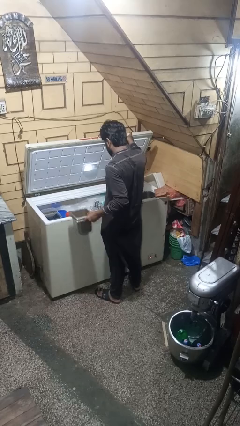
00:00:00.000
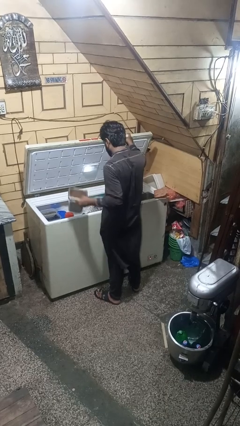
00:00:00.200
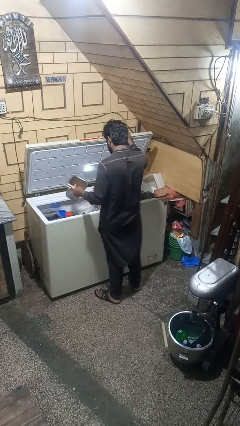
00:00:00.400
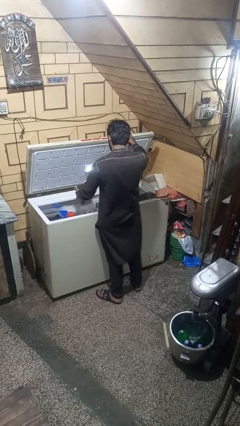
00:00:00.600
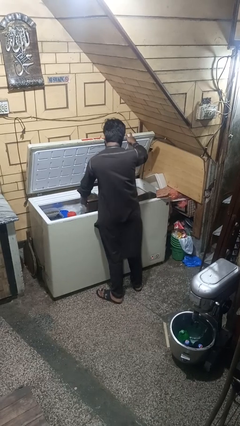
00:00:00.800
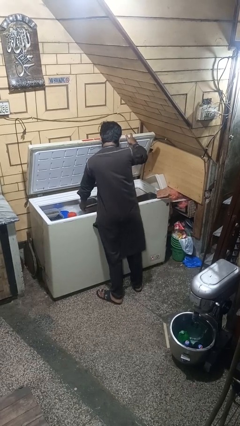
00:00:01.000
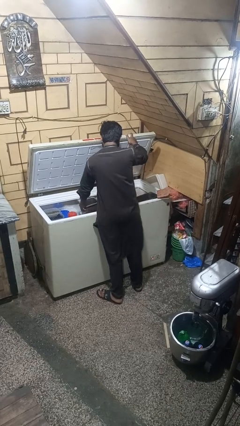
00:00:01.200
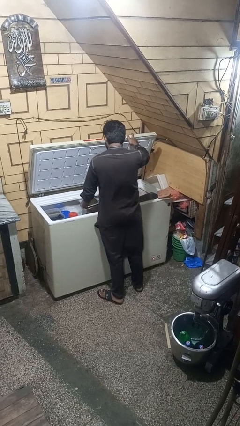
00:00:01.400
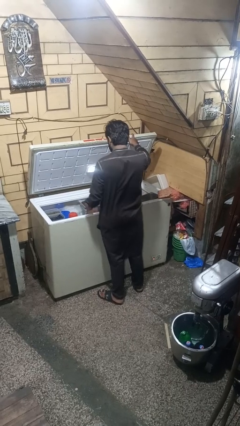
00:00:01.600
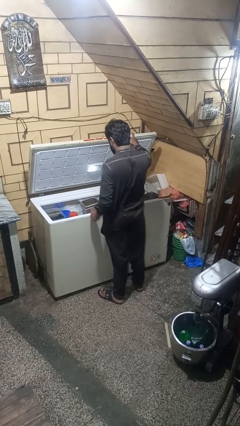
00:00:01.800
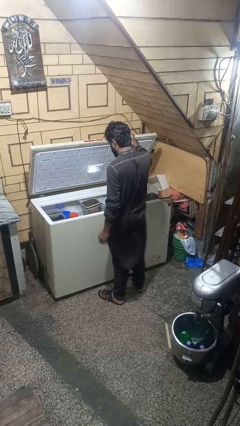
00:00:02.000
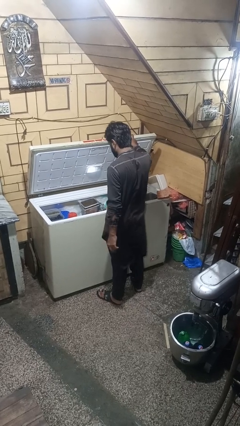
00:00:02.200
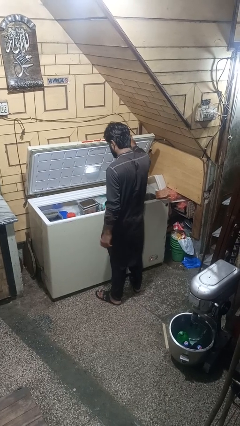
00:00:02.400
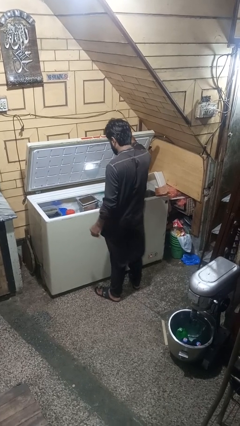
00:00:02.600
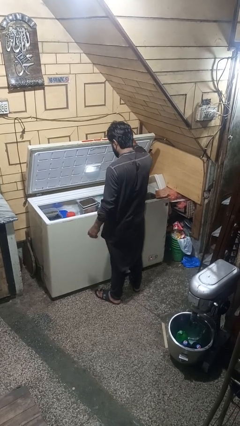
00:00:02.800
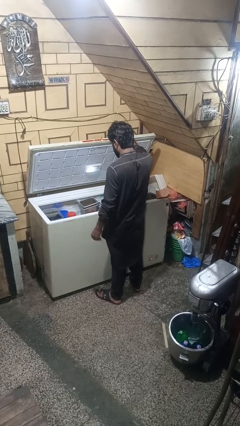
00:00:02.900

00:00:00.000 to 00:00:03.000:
person puts object into refrigerator

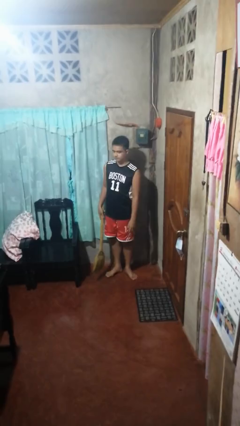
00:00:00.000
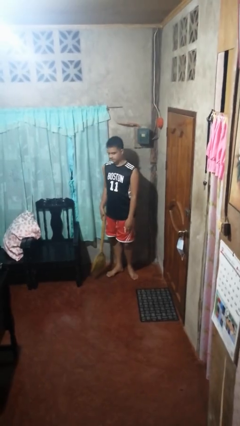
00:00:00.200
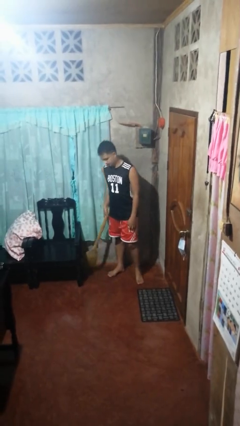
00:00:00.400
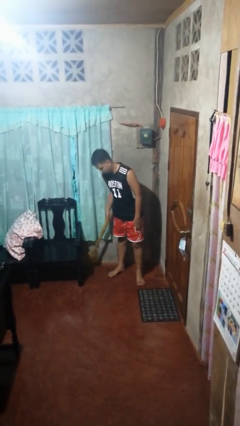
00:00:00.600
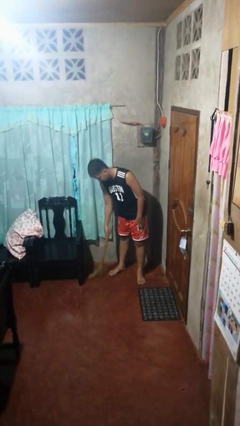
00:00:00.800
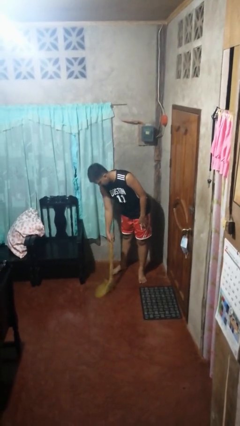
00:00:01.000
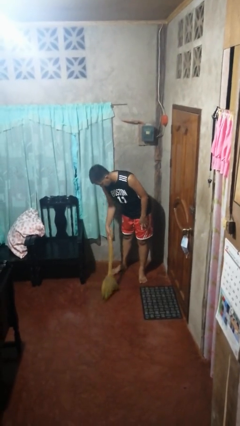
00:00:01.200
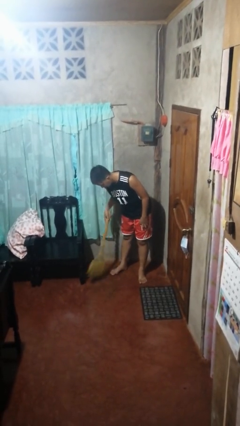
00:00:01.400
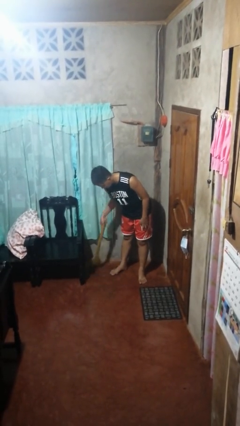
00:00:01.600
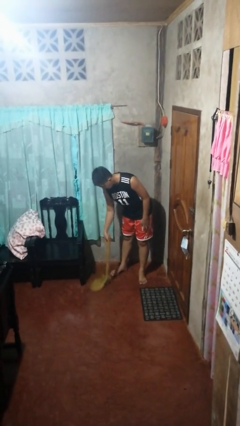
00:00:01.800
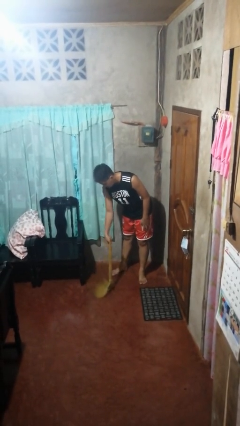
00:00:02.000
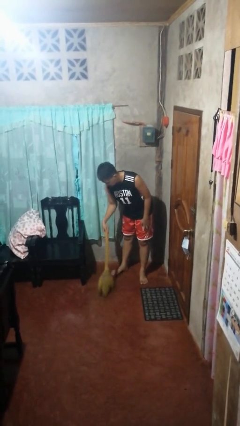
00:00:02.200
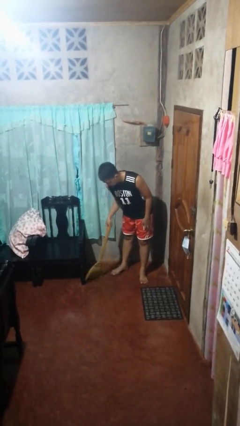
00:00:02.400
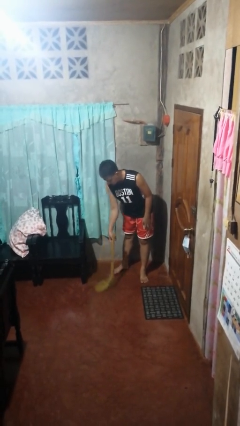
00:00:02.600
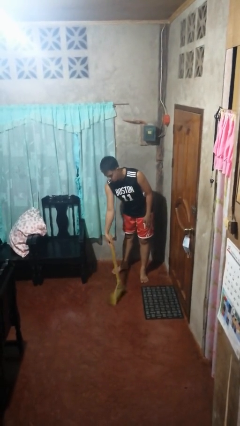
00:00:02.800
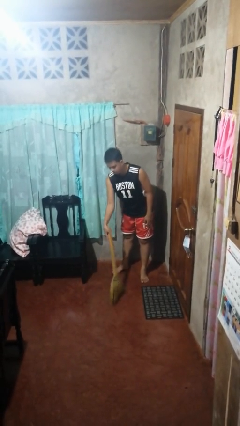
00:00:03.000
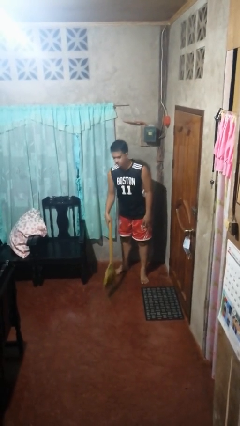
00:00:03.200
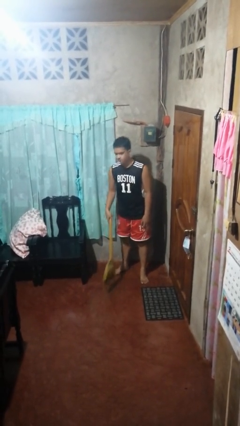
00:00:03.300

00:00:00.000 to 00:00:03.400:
person sweeps floor

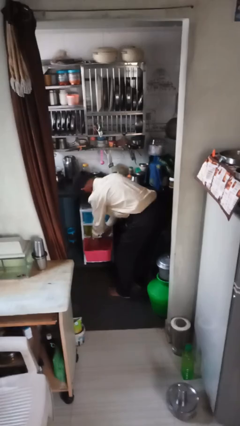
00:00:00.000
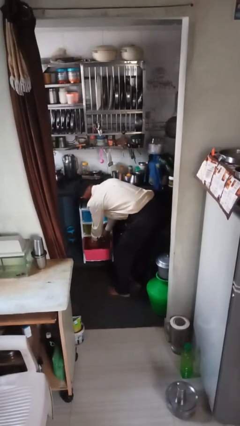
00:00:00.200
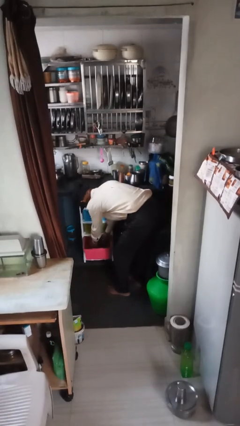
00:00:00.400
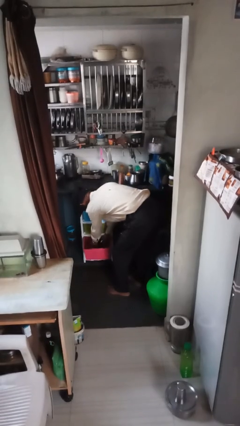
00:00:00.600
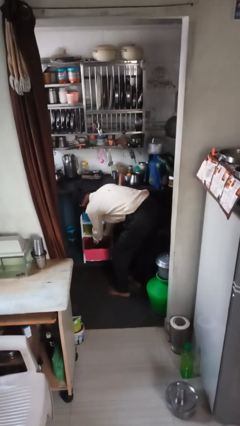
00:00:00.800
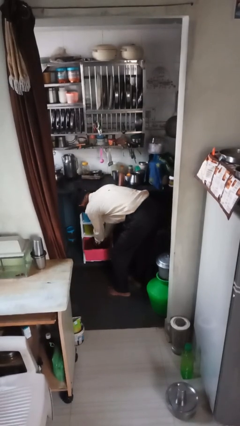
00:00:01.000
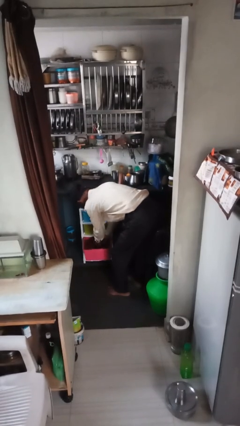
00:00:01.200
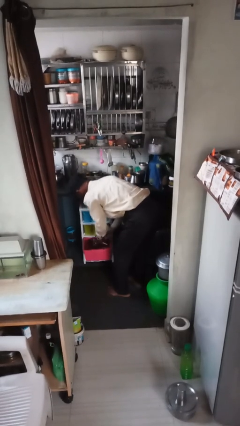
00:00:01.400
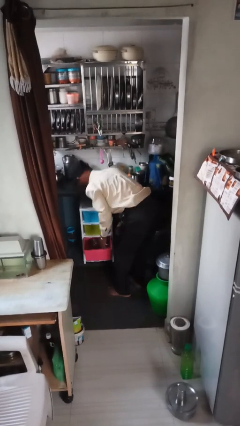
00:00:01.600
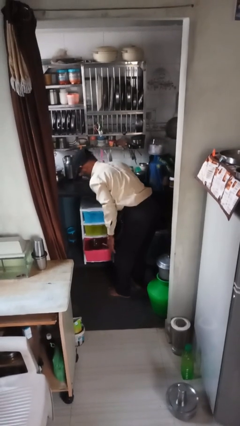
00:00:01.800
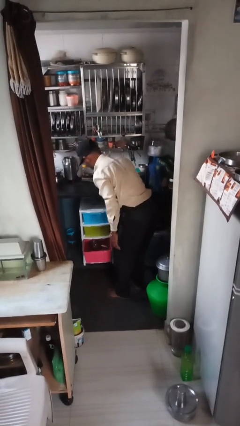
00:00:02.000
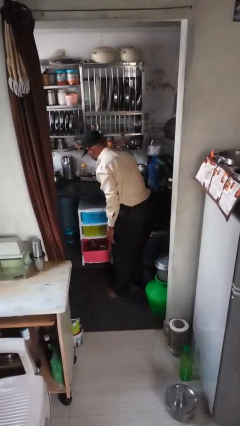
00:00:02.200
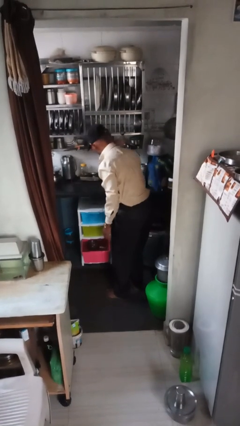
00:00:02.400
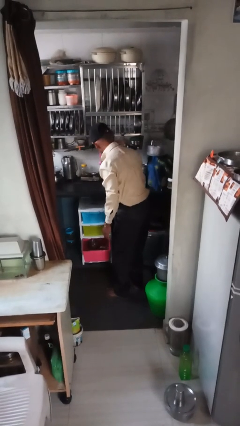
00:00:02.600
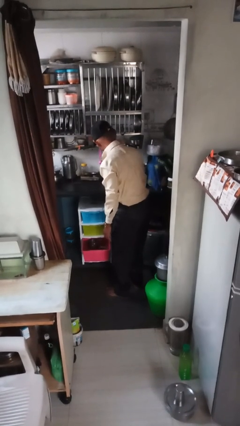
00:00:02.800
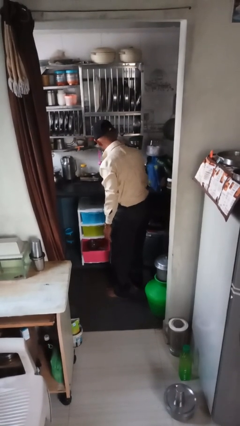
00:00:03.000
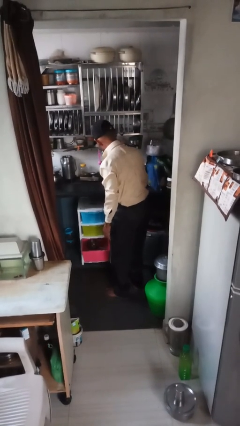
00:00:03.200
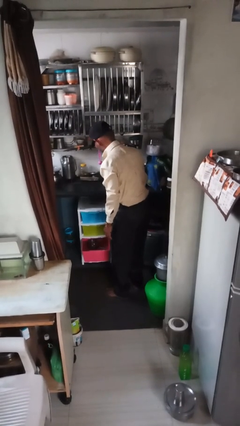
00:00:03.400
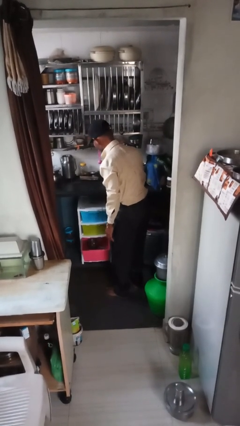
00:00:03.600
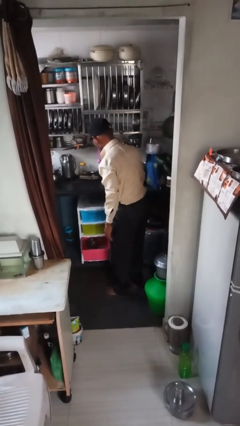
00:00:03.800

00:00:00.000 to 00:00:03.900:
person puts object into kitchen drawer

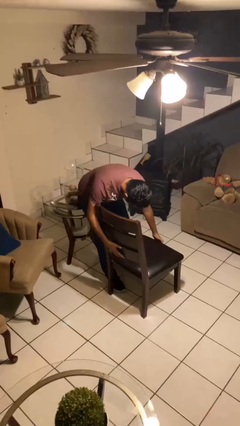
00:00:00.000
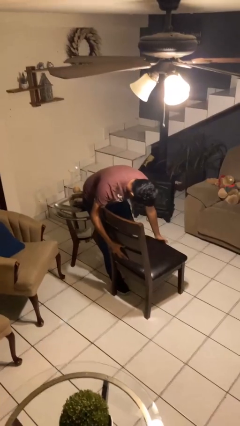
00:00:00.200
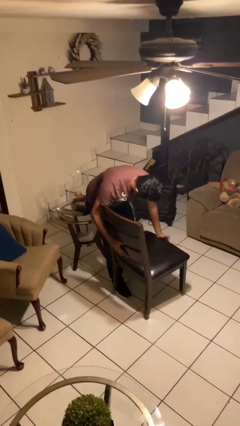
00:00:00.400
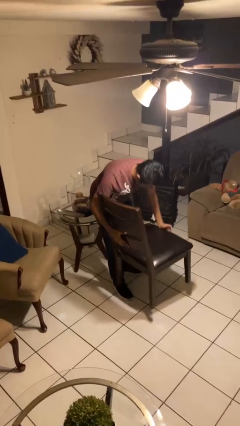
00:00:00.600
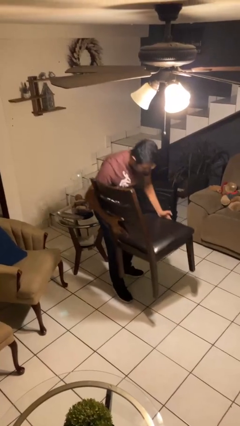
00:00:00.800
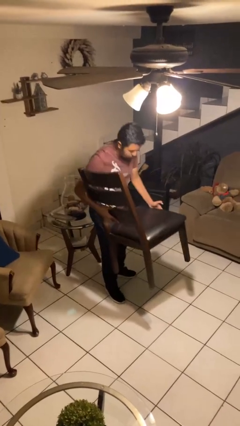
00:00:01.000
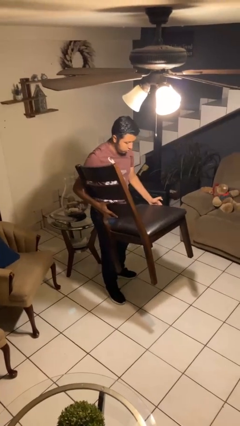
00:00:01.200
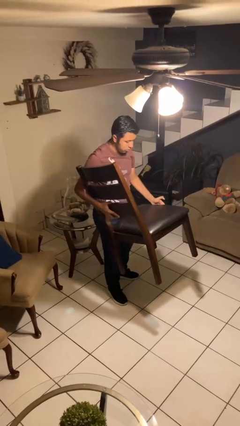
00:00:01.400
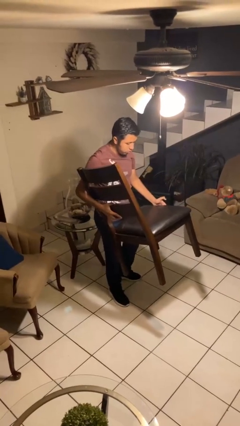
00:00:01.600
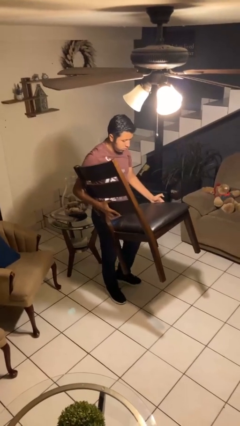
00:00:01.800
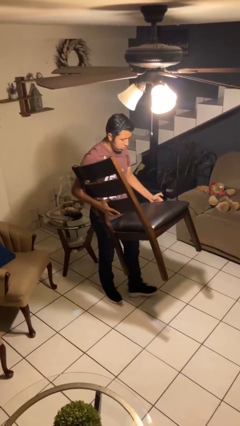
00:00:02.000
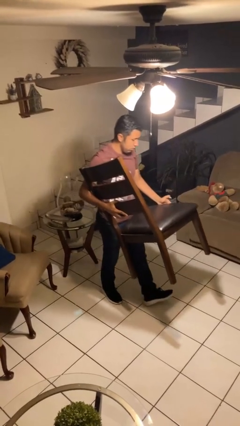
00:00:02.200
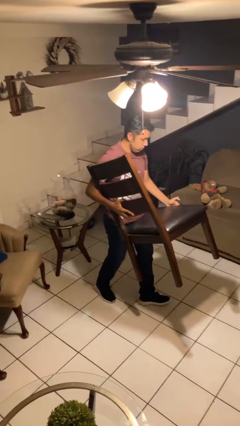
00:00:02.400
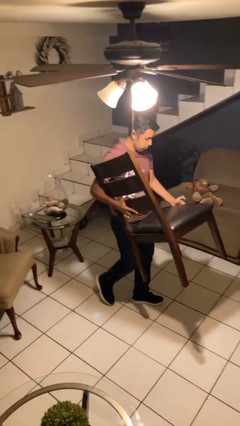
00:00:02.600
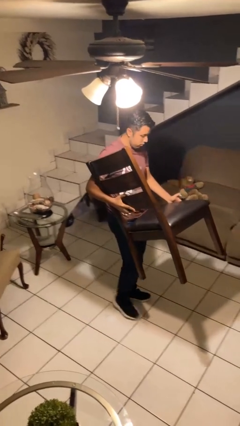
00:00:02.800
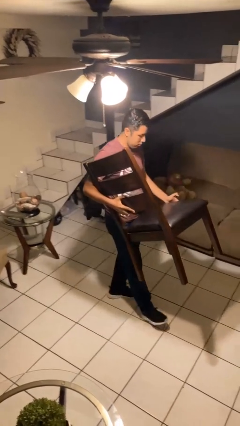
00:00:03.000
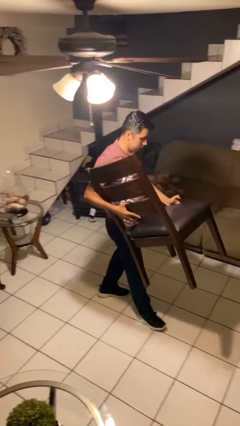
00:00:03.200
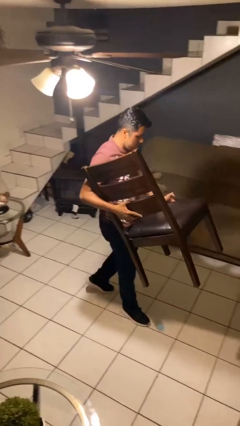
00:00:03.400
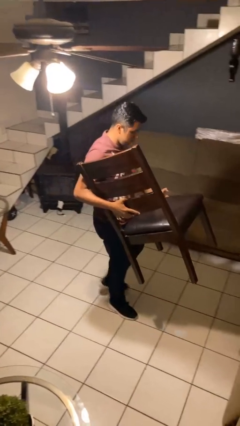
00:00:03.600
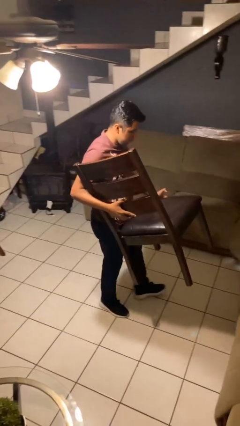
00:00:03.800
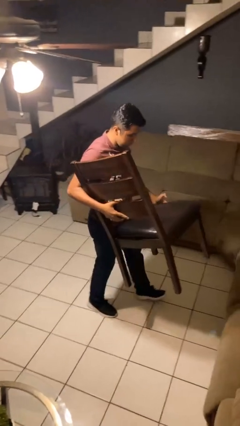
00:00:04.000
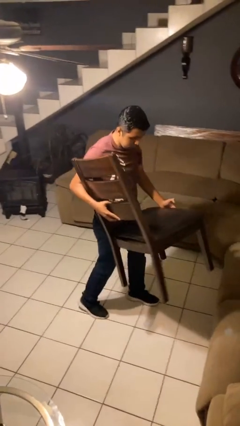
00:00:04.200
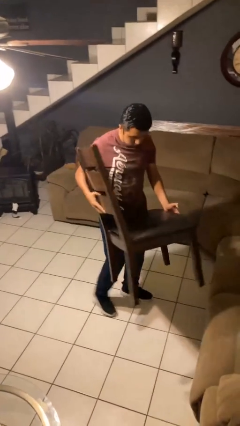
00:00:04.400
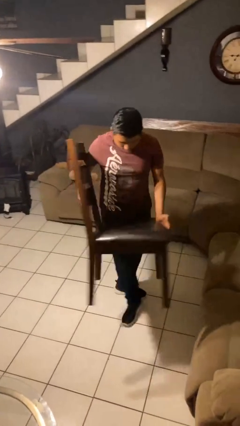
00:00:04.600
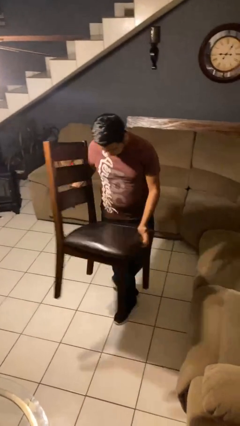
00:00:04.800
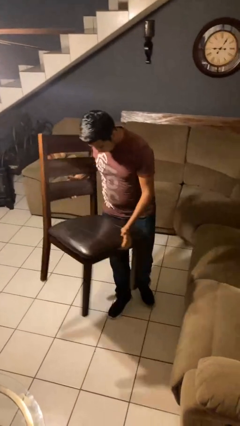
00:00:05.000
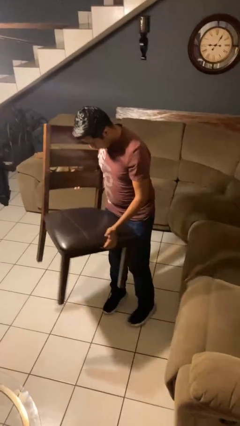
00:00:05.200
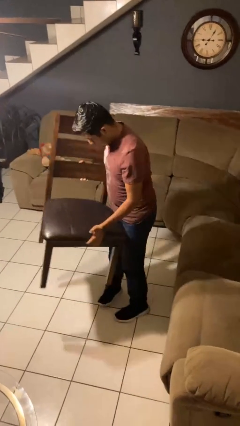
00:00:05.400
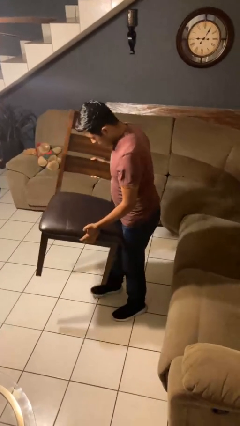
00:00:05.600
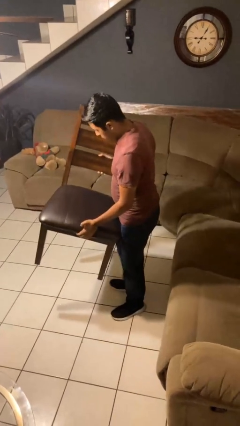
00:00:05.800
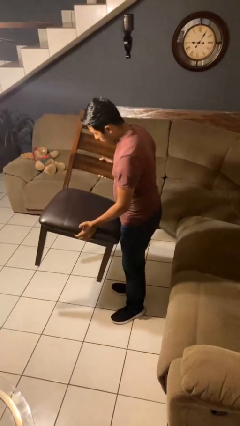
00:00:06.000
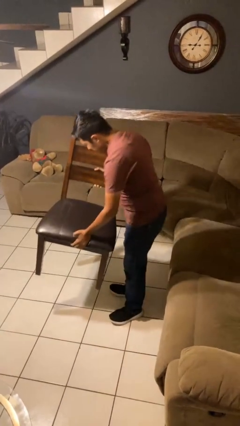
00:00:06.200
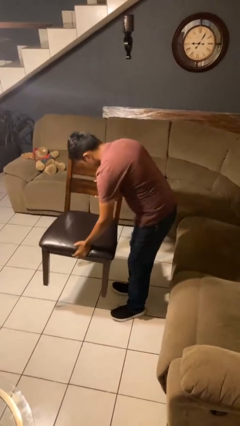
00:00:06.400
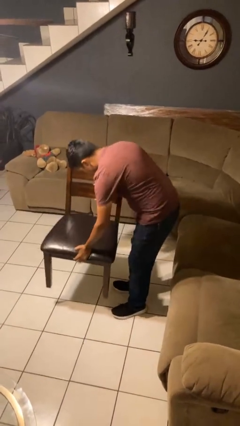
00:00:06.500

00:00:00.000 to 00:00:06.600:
person carries furniture

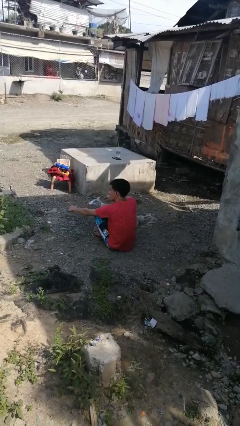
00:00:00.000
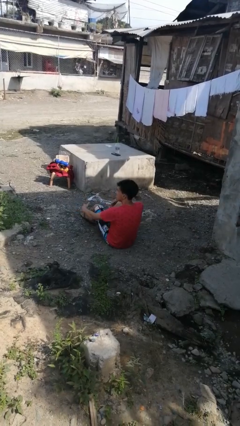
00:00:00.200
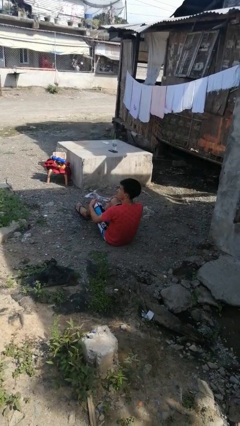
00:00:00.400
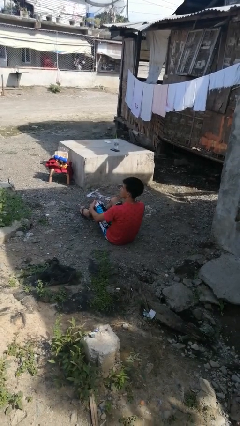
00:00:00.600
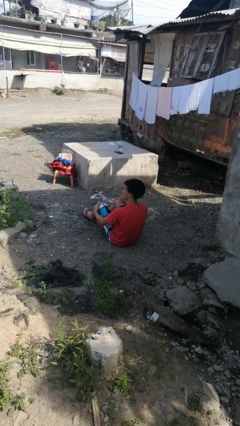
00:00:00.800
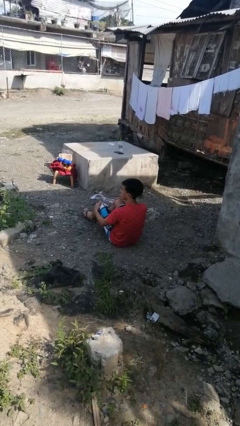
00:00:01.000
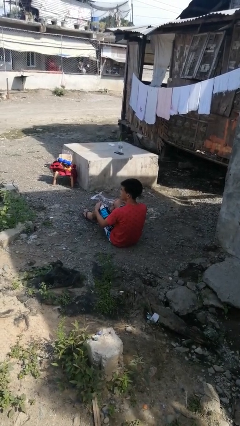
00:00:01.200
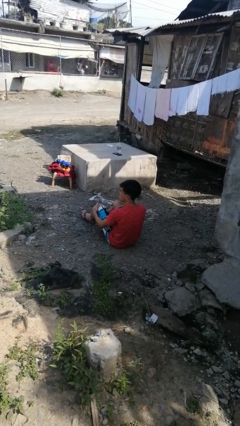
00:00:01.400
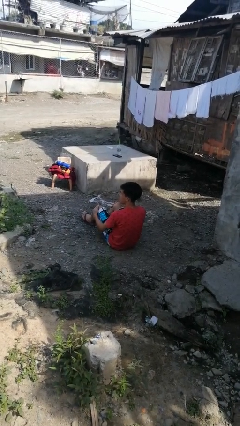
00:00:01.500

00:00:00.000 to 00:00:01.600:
person lies down on floor
